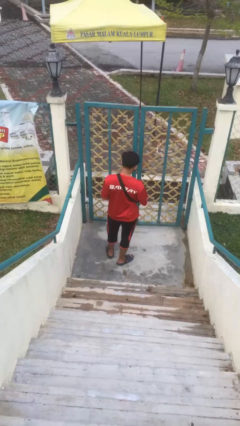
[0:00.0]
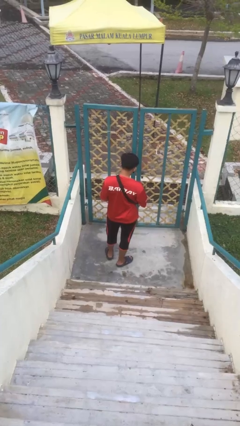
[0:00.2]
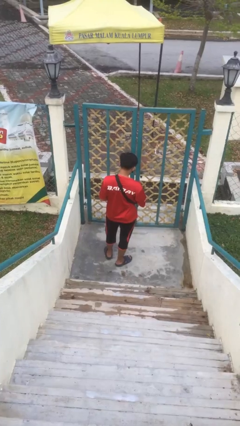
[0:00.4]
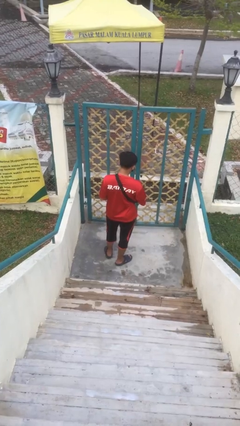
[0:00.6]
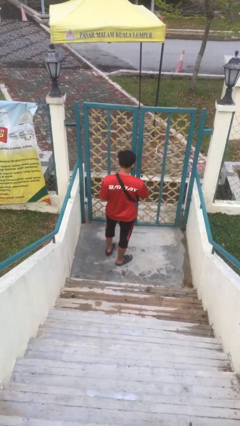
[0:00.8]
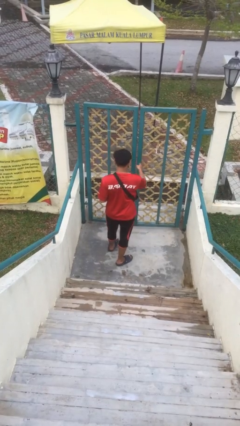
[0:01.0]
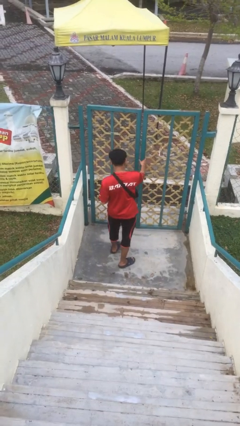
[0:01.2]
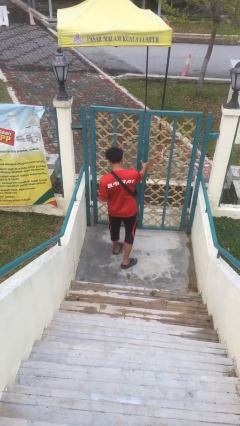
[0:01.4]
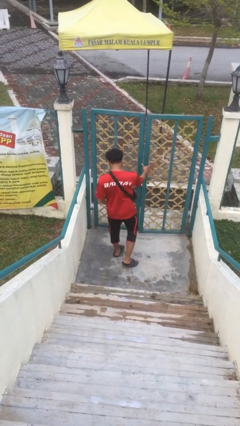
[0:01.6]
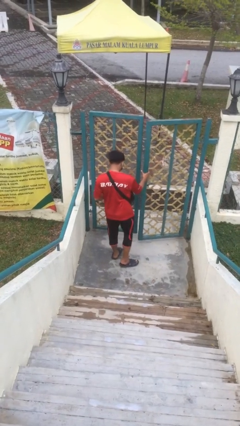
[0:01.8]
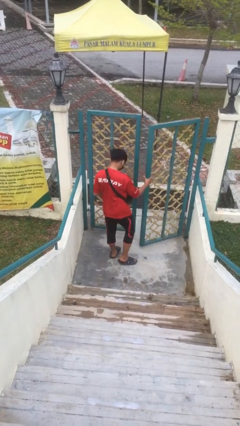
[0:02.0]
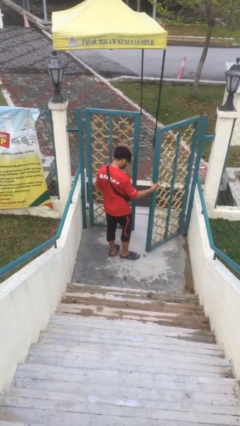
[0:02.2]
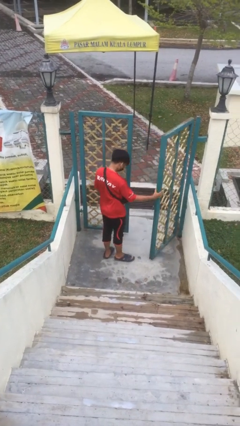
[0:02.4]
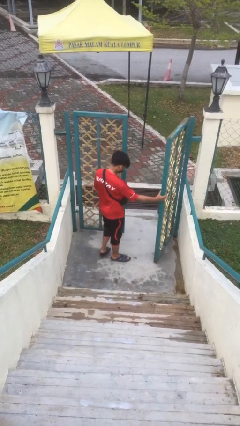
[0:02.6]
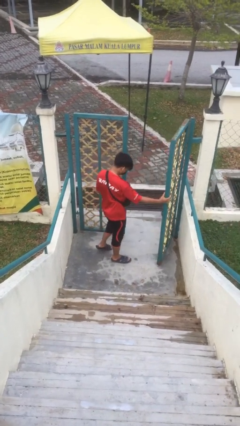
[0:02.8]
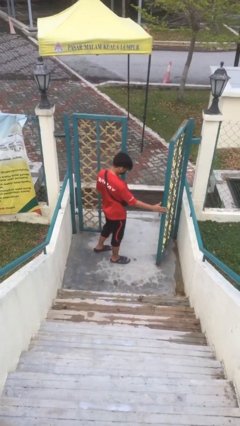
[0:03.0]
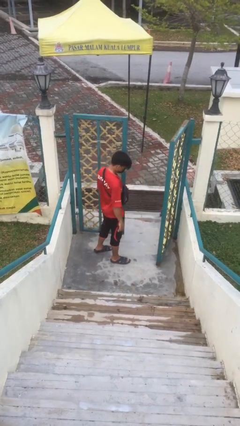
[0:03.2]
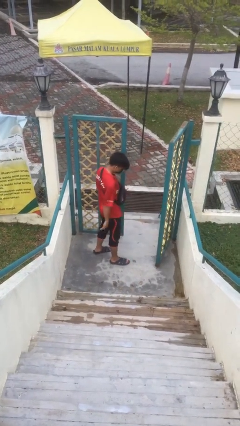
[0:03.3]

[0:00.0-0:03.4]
person opens facility door

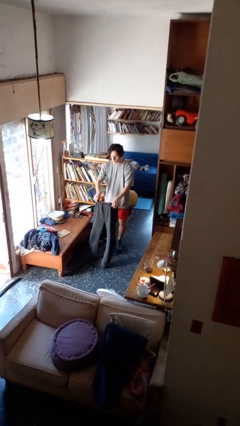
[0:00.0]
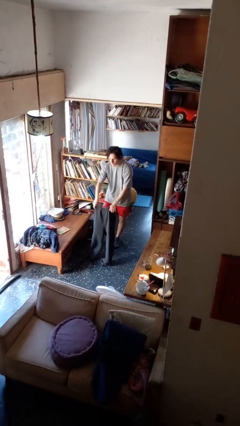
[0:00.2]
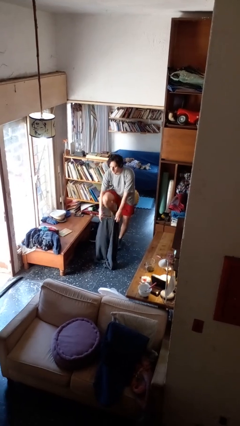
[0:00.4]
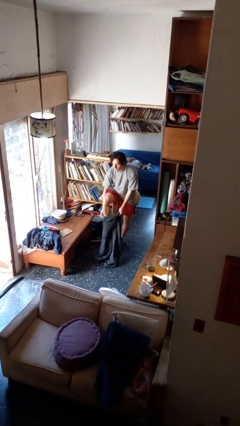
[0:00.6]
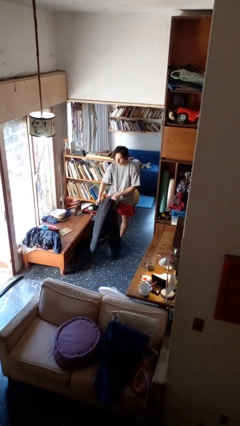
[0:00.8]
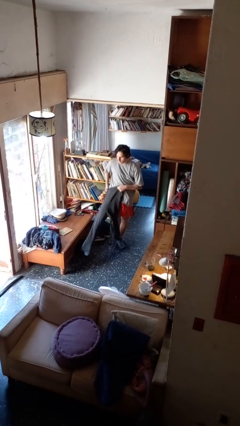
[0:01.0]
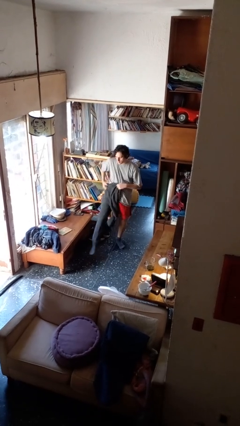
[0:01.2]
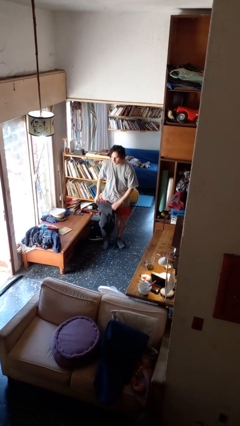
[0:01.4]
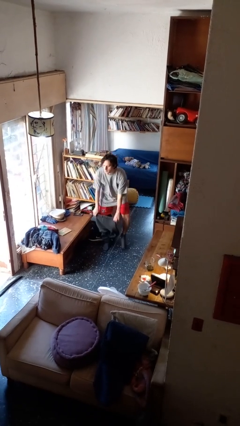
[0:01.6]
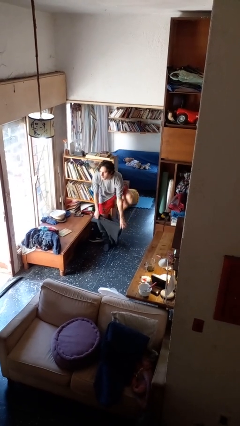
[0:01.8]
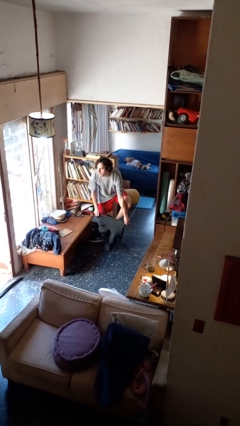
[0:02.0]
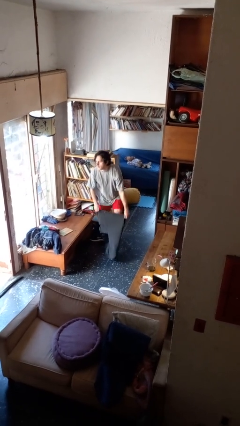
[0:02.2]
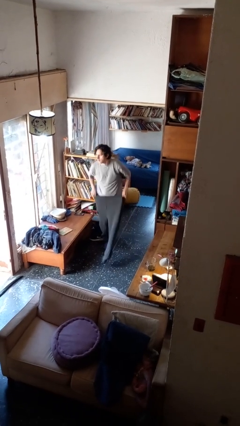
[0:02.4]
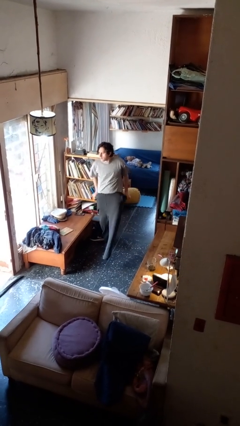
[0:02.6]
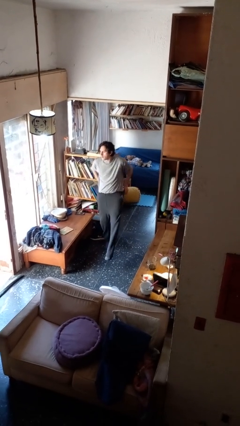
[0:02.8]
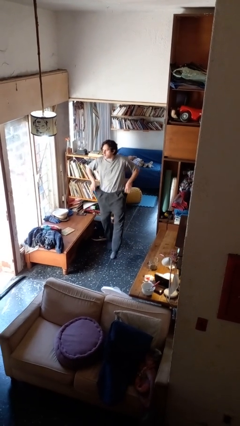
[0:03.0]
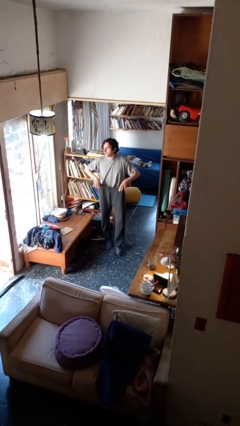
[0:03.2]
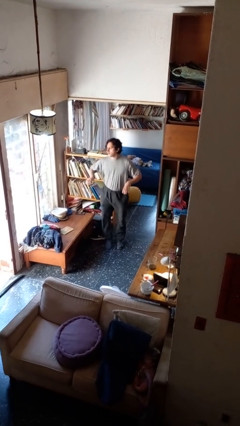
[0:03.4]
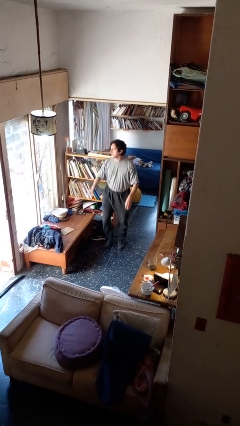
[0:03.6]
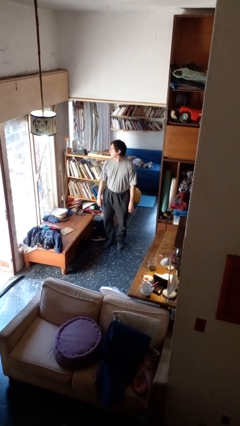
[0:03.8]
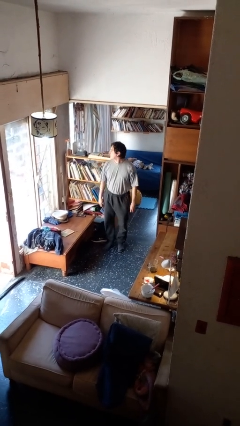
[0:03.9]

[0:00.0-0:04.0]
person puts on pants

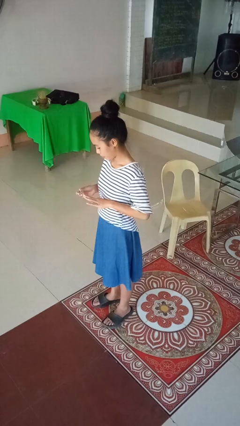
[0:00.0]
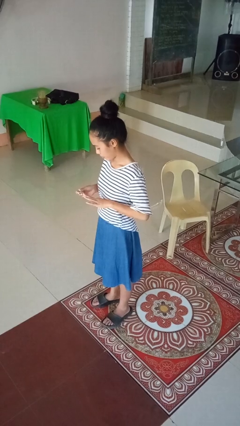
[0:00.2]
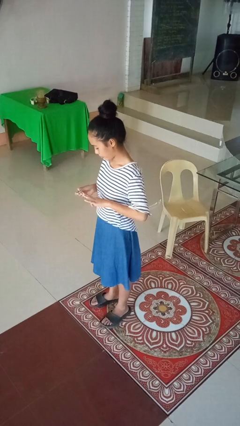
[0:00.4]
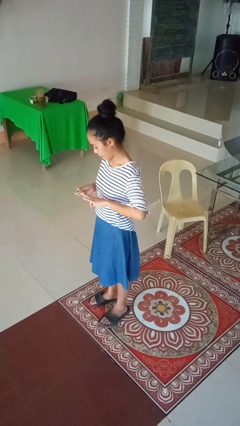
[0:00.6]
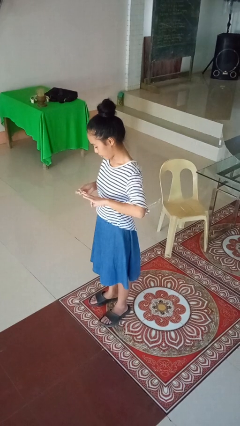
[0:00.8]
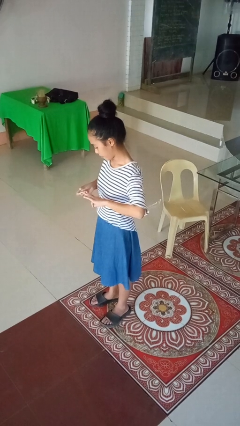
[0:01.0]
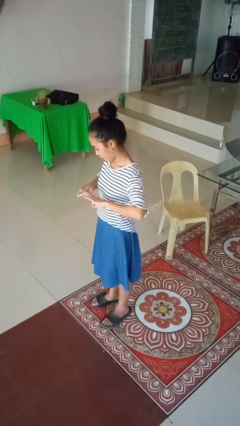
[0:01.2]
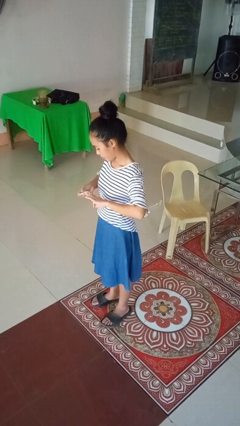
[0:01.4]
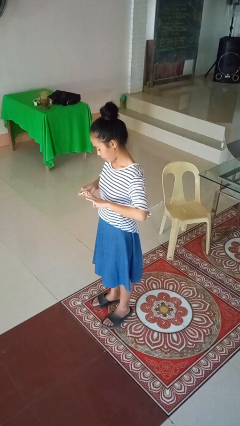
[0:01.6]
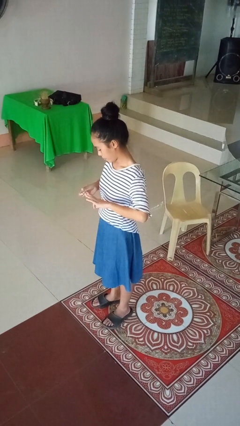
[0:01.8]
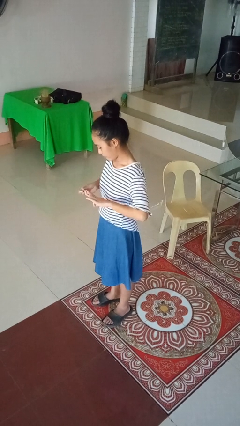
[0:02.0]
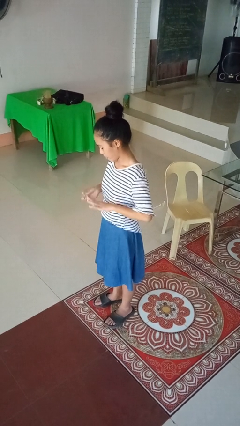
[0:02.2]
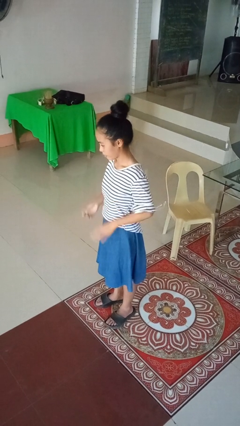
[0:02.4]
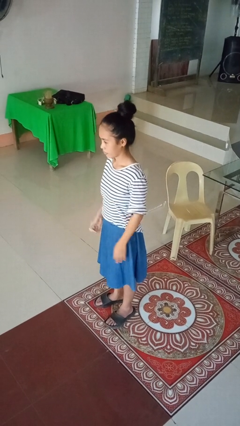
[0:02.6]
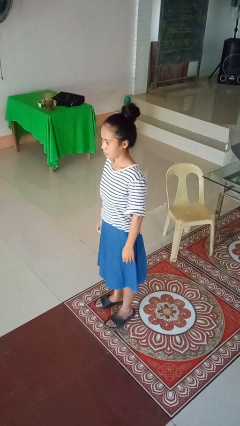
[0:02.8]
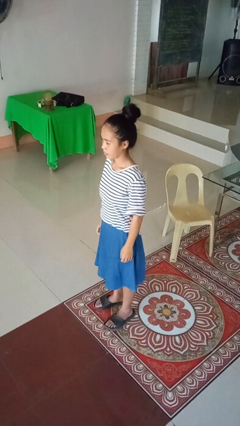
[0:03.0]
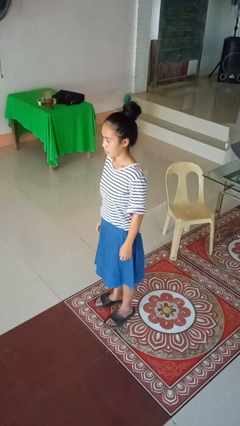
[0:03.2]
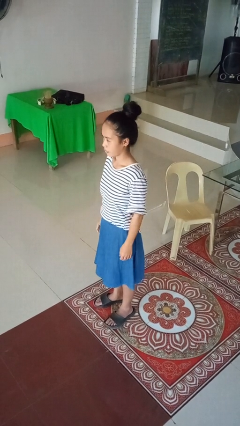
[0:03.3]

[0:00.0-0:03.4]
person clips fingernails

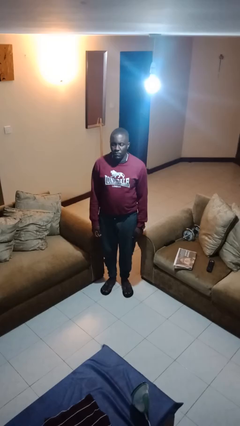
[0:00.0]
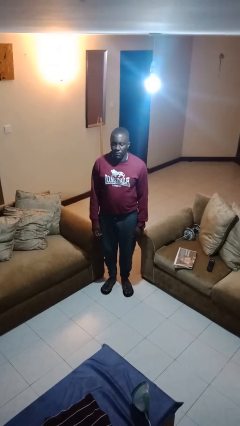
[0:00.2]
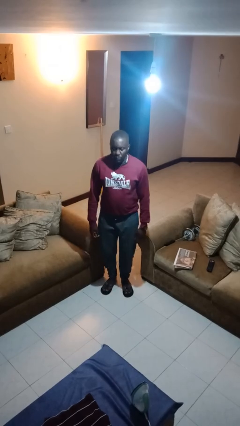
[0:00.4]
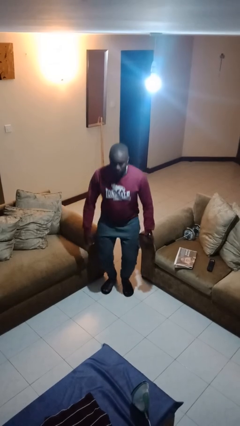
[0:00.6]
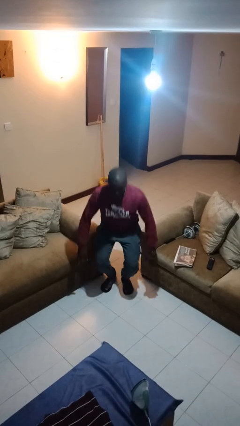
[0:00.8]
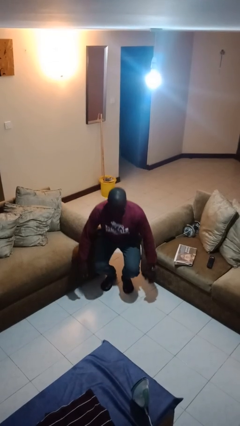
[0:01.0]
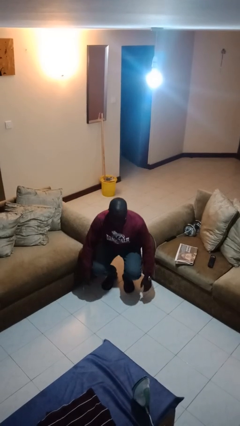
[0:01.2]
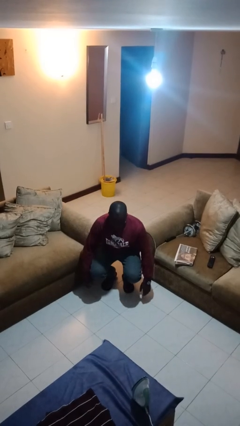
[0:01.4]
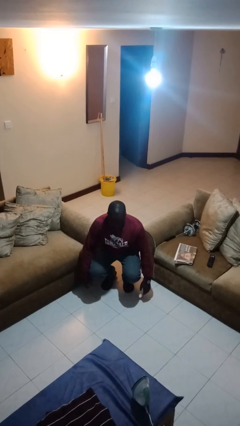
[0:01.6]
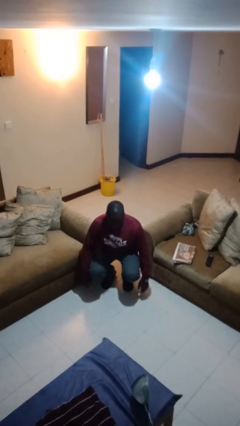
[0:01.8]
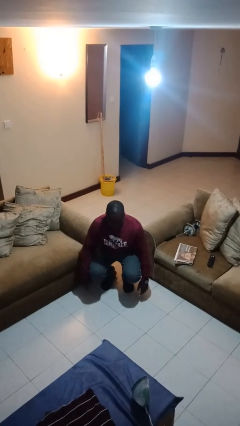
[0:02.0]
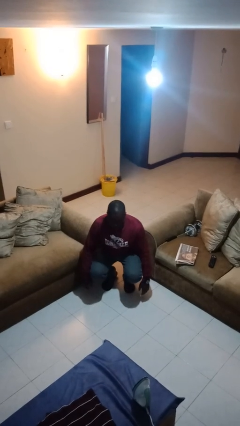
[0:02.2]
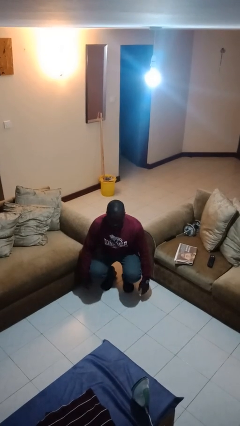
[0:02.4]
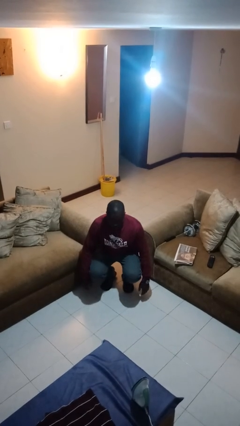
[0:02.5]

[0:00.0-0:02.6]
person squats

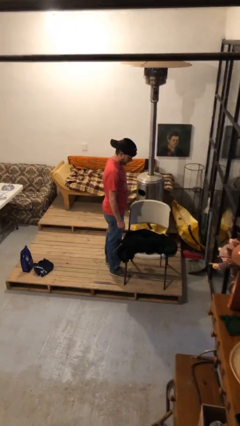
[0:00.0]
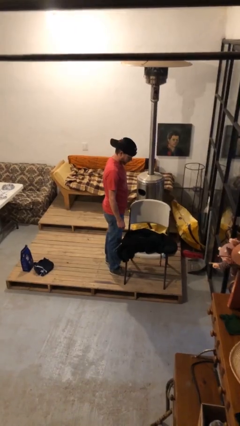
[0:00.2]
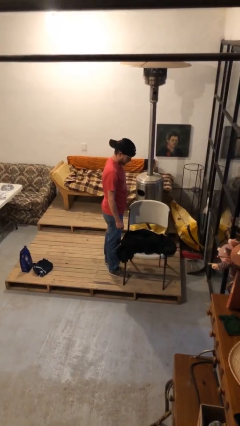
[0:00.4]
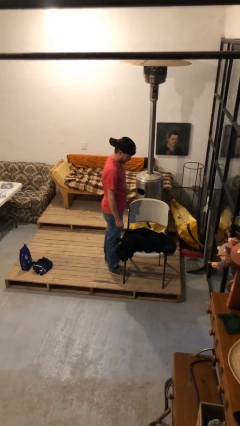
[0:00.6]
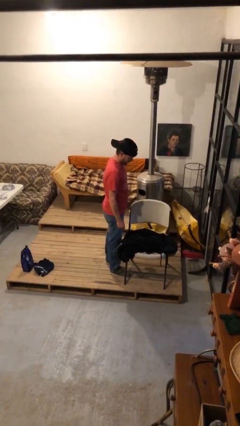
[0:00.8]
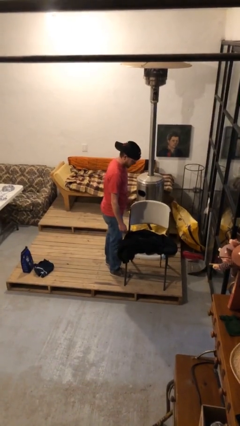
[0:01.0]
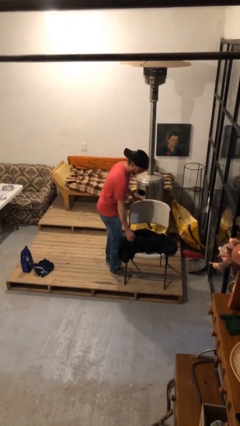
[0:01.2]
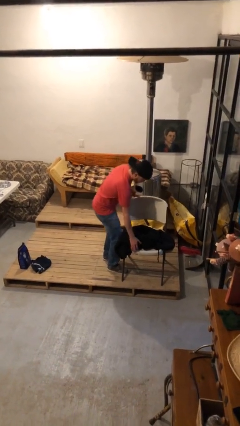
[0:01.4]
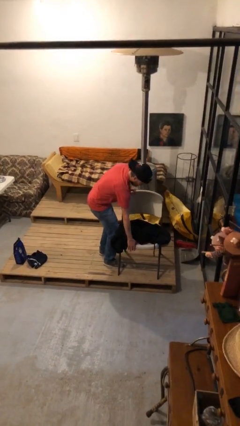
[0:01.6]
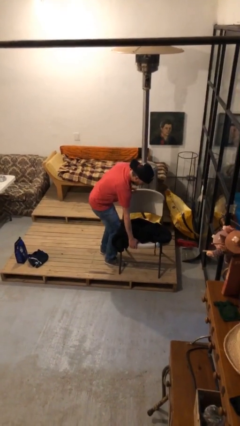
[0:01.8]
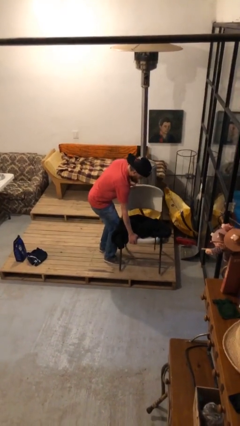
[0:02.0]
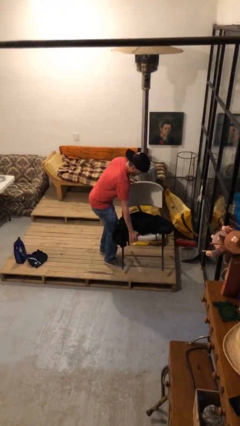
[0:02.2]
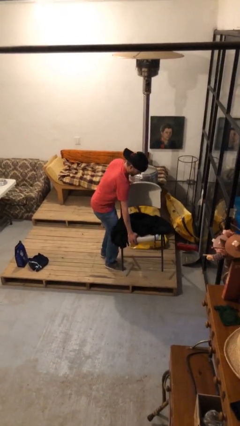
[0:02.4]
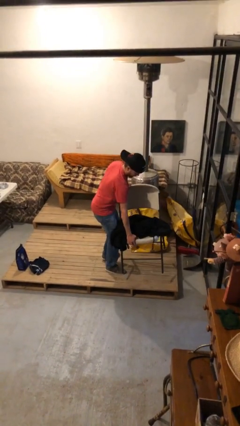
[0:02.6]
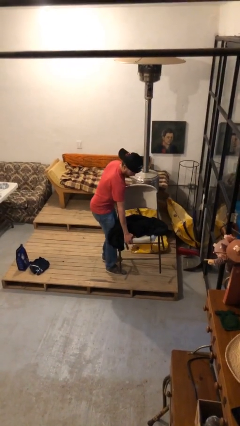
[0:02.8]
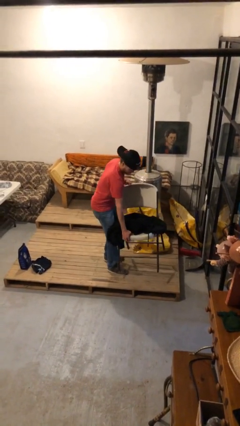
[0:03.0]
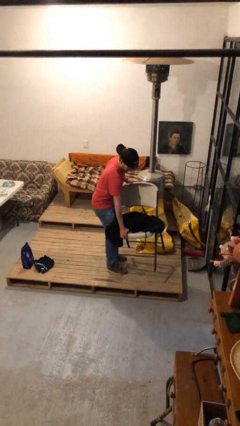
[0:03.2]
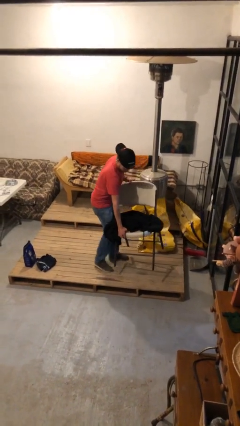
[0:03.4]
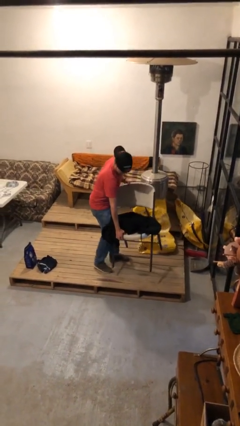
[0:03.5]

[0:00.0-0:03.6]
person picks up object from floor

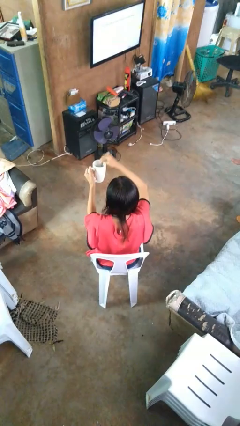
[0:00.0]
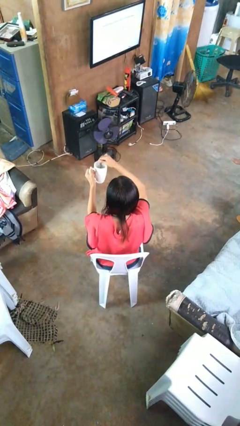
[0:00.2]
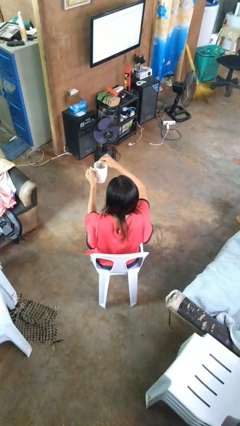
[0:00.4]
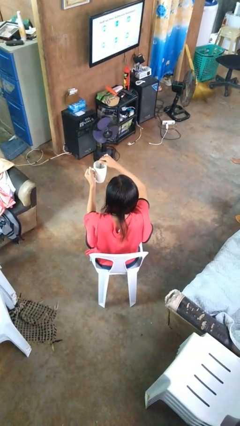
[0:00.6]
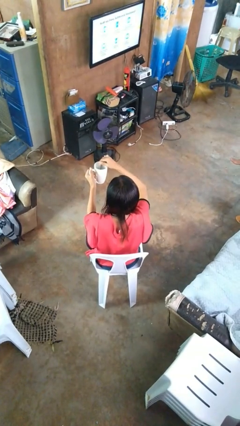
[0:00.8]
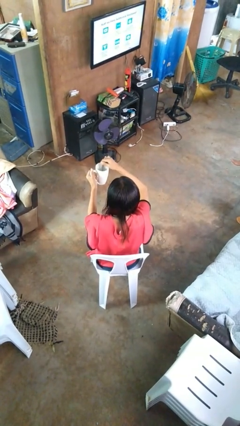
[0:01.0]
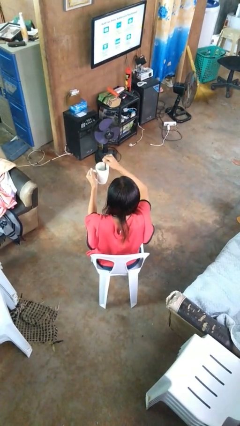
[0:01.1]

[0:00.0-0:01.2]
person stirs mug
